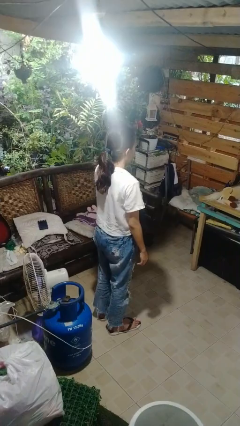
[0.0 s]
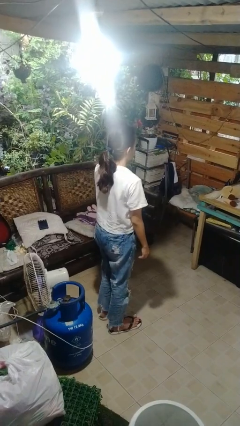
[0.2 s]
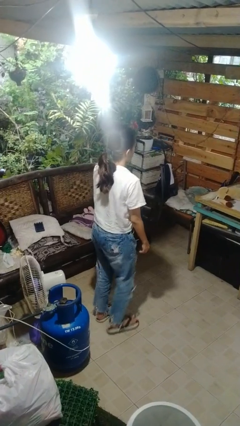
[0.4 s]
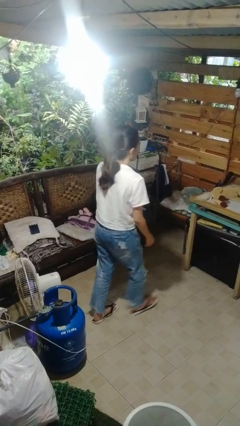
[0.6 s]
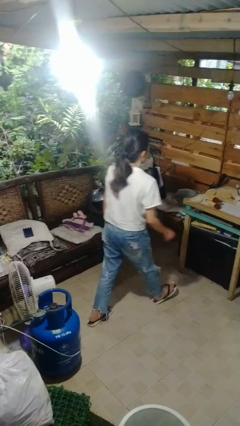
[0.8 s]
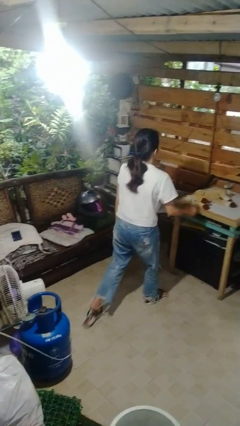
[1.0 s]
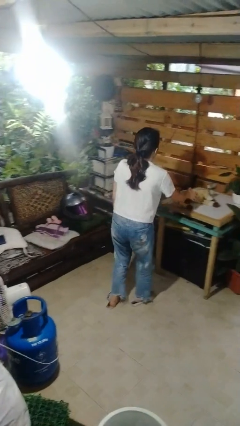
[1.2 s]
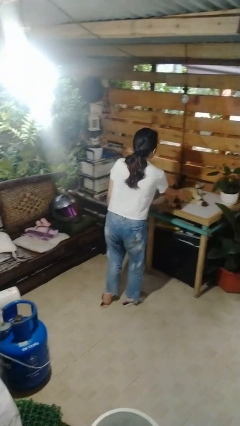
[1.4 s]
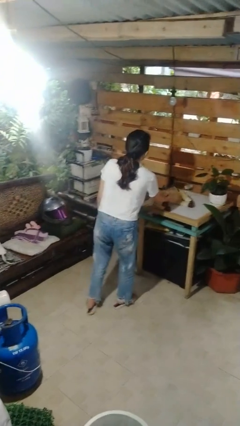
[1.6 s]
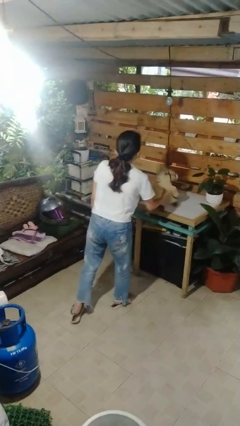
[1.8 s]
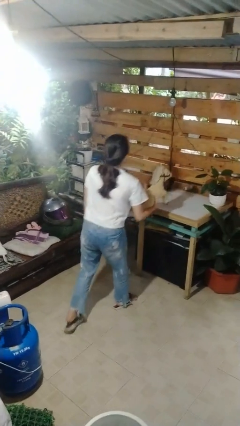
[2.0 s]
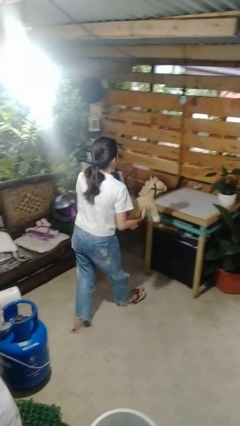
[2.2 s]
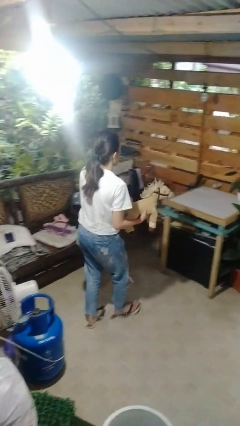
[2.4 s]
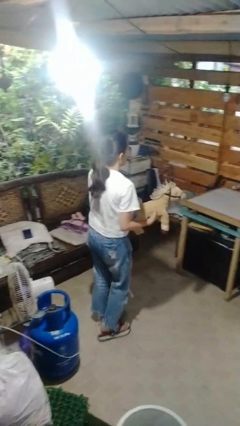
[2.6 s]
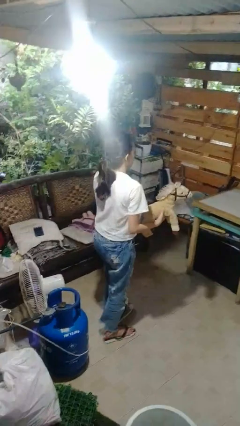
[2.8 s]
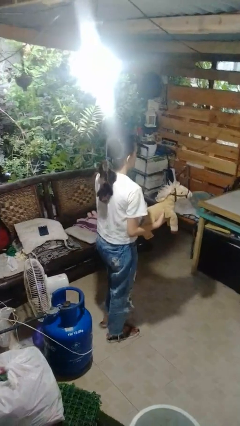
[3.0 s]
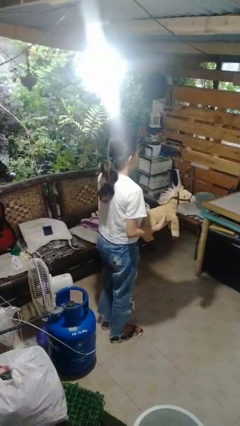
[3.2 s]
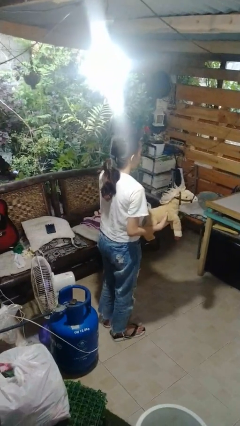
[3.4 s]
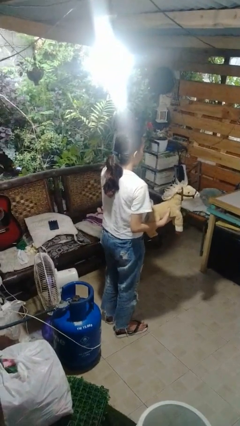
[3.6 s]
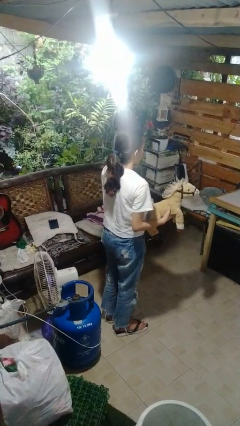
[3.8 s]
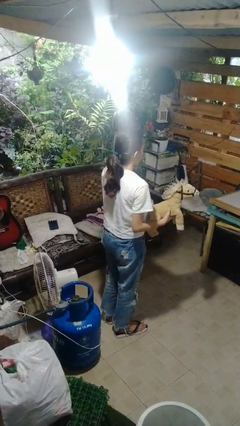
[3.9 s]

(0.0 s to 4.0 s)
person picks up object from table

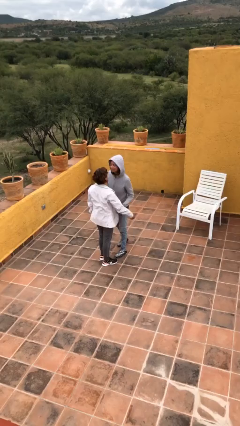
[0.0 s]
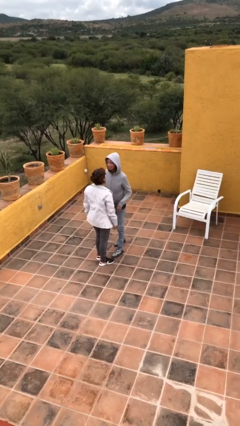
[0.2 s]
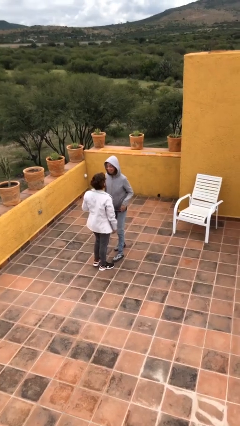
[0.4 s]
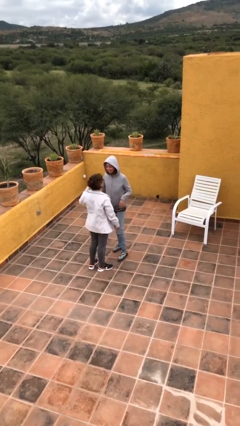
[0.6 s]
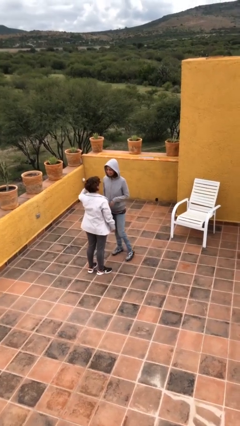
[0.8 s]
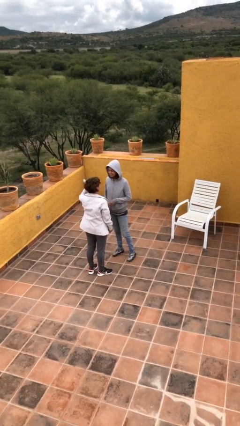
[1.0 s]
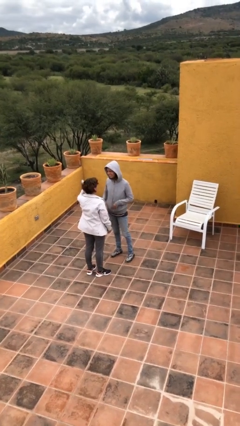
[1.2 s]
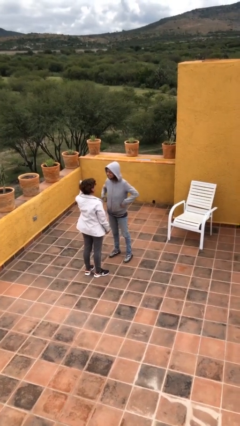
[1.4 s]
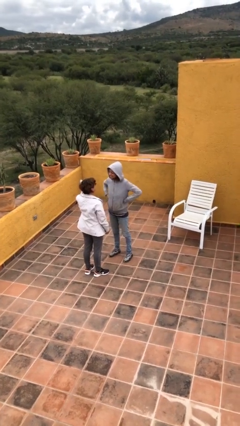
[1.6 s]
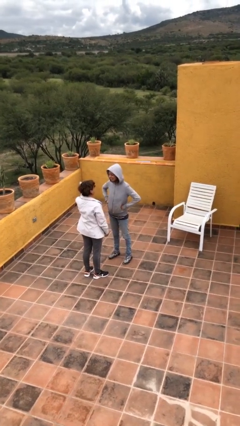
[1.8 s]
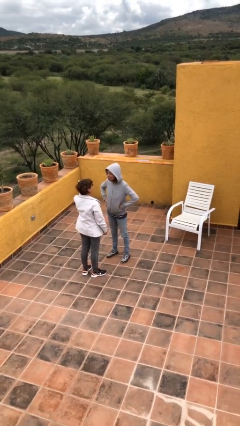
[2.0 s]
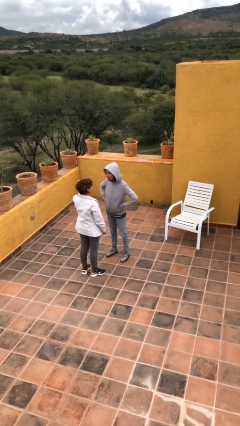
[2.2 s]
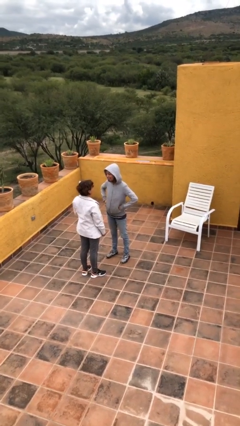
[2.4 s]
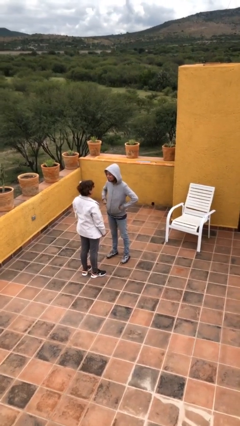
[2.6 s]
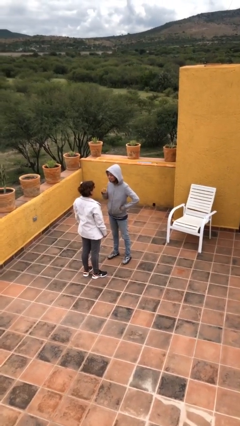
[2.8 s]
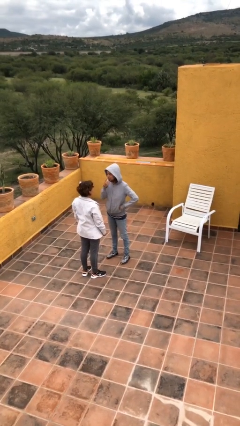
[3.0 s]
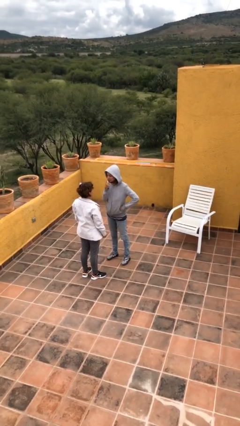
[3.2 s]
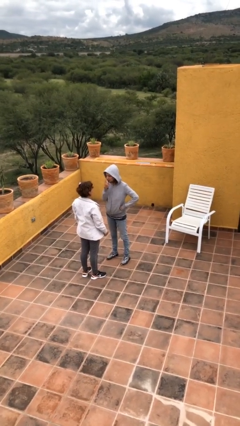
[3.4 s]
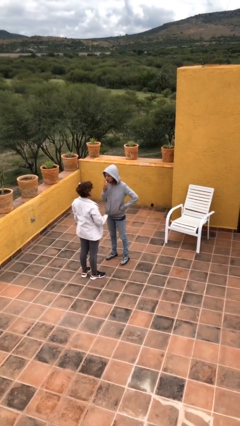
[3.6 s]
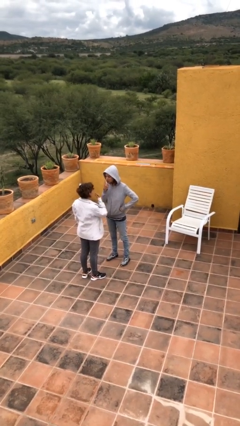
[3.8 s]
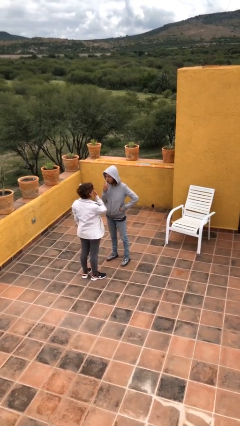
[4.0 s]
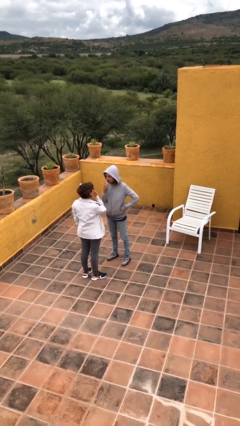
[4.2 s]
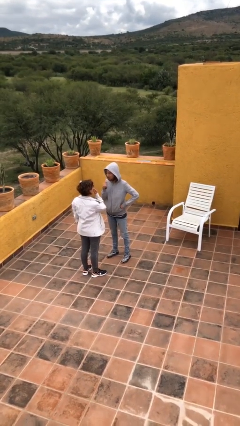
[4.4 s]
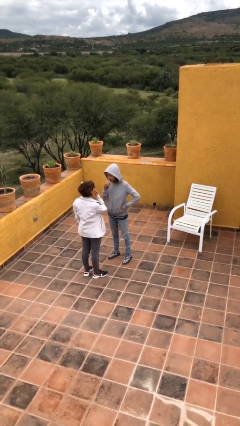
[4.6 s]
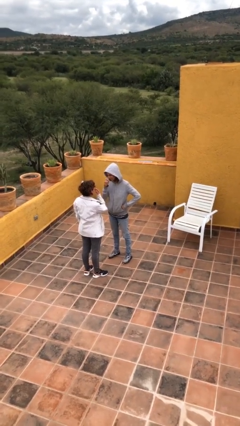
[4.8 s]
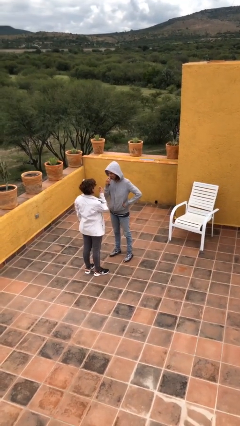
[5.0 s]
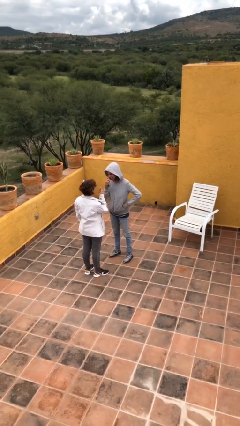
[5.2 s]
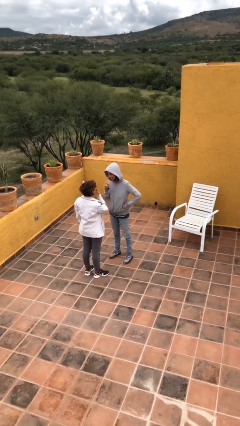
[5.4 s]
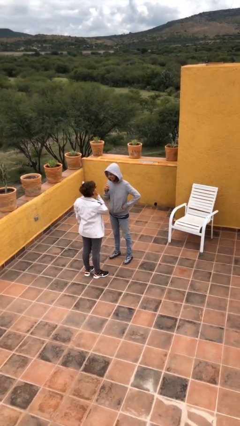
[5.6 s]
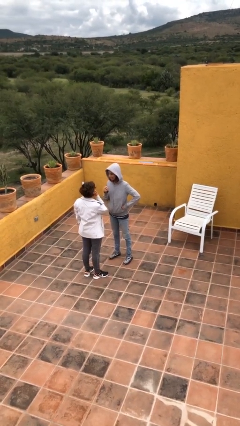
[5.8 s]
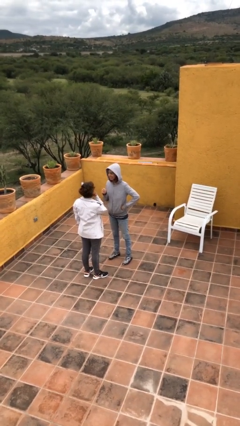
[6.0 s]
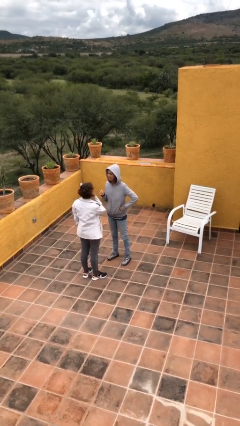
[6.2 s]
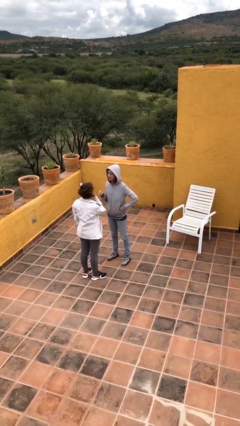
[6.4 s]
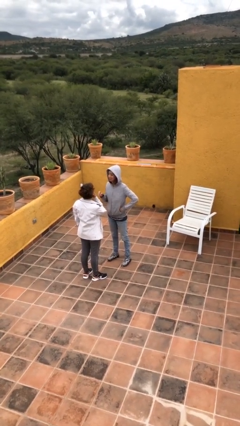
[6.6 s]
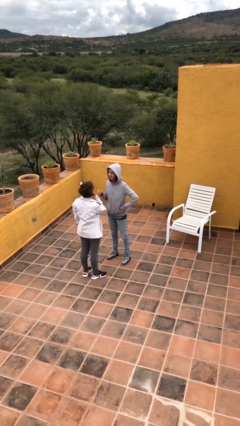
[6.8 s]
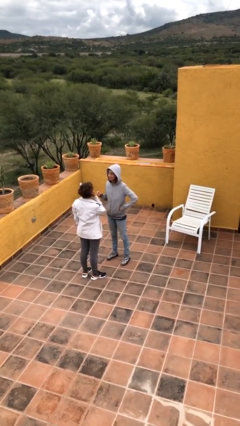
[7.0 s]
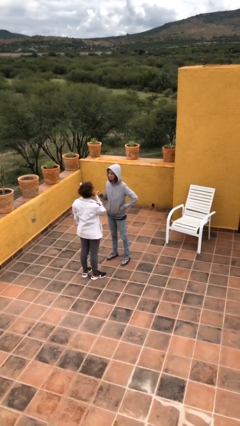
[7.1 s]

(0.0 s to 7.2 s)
person talks to person

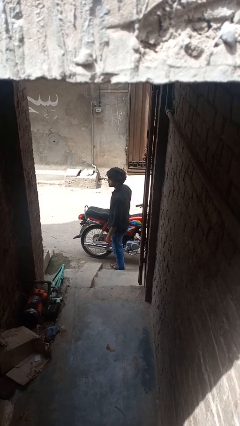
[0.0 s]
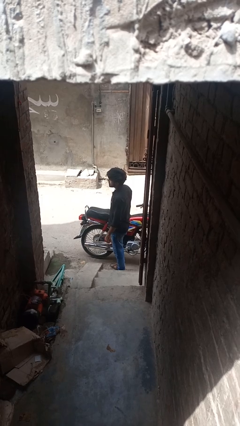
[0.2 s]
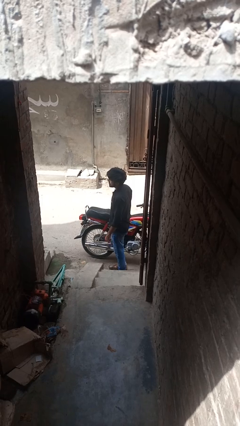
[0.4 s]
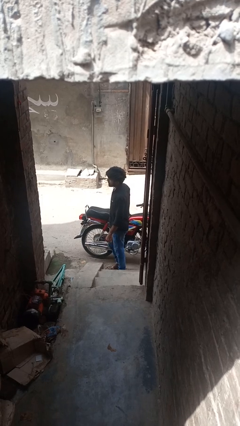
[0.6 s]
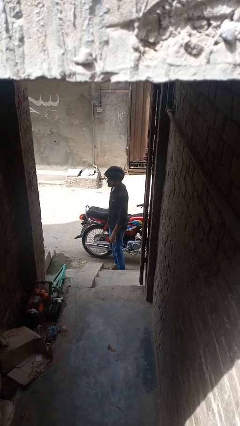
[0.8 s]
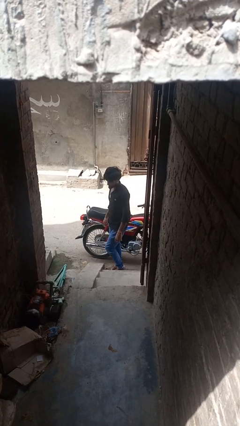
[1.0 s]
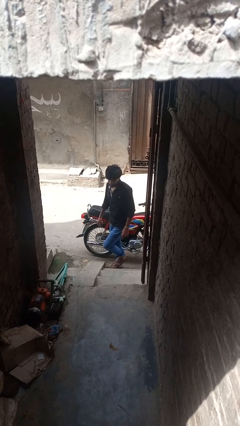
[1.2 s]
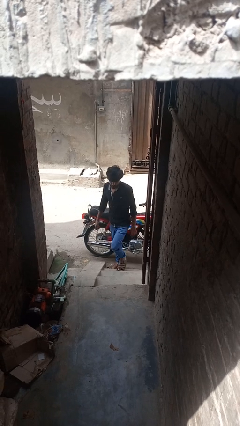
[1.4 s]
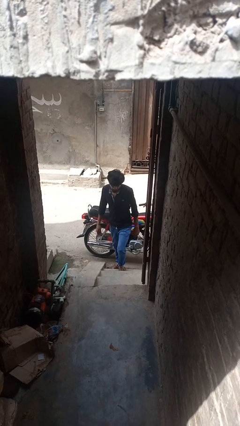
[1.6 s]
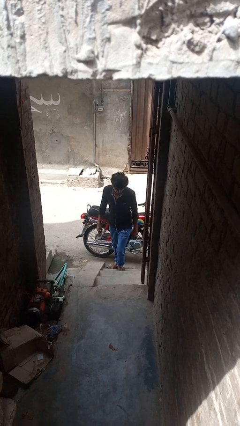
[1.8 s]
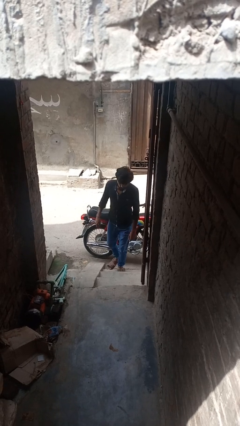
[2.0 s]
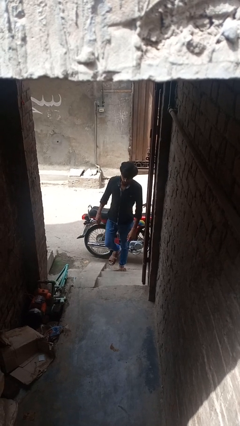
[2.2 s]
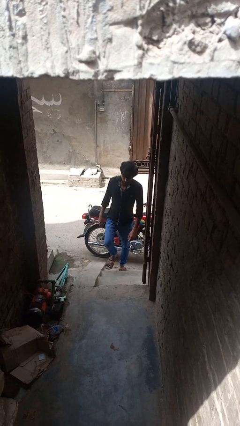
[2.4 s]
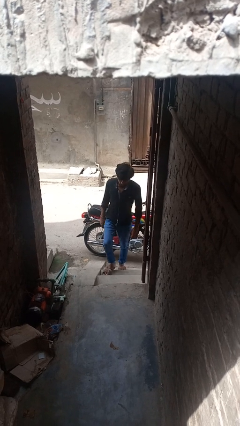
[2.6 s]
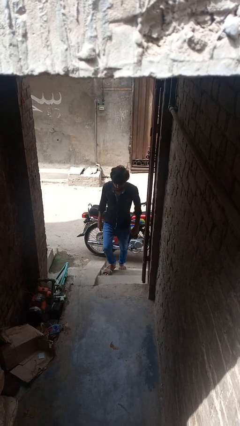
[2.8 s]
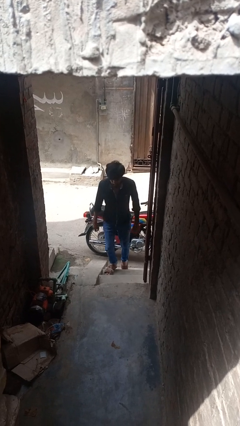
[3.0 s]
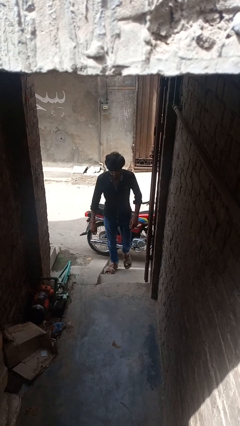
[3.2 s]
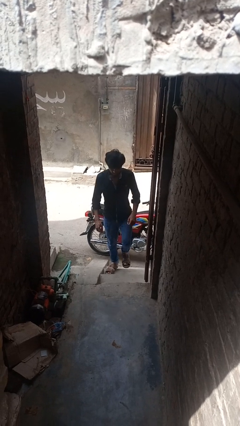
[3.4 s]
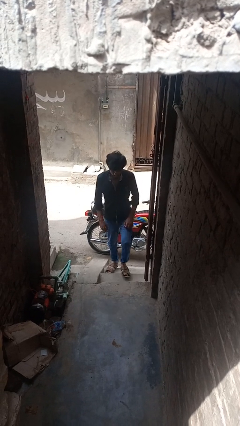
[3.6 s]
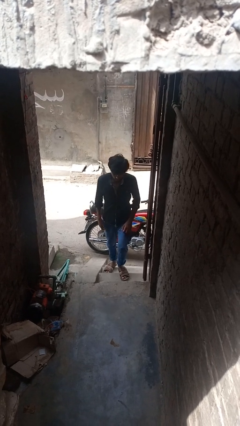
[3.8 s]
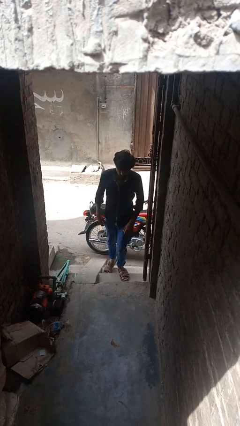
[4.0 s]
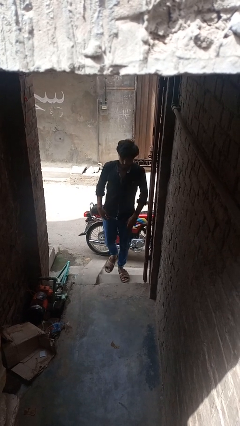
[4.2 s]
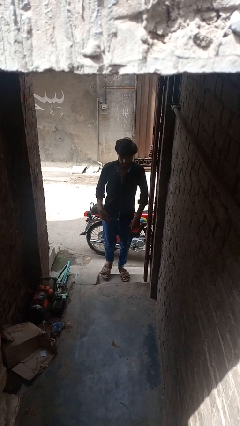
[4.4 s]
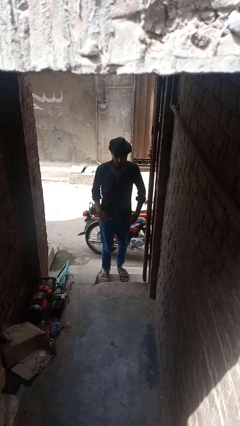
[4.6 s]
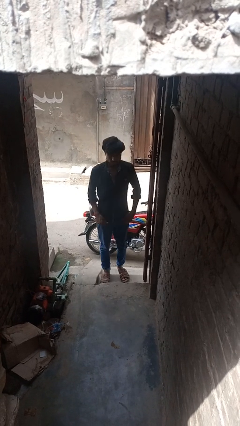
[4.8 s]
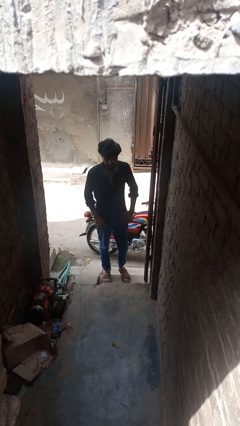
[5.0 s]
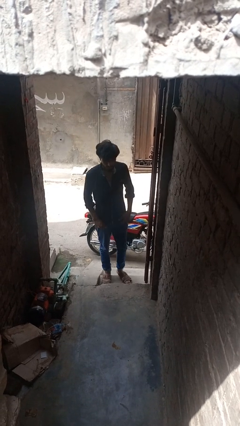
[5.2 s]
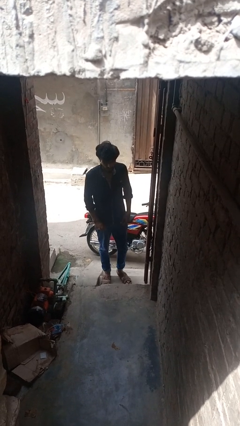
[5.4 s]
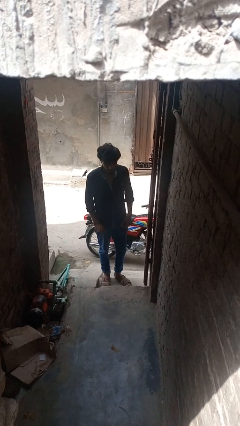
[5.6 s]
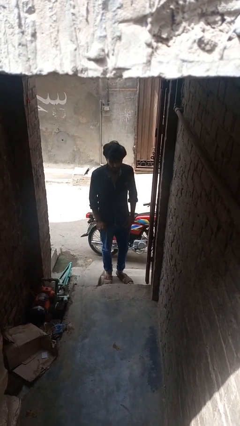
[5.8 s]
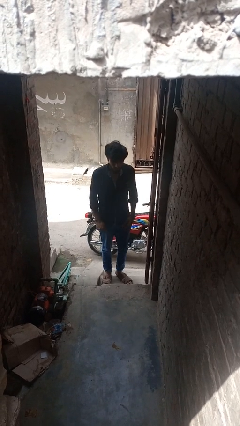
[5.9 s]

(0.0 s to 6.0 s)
person climbs up stairs

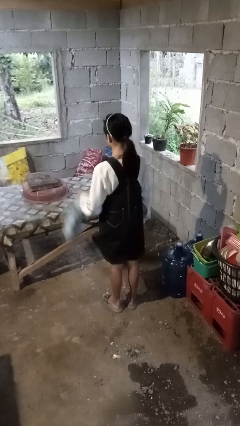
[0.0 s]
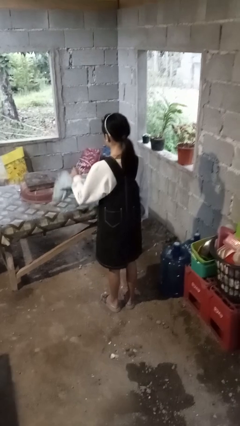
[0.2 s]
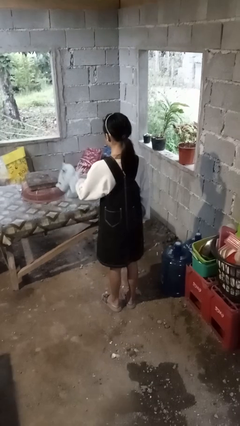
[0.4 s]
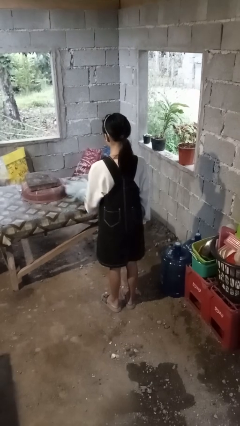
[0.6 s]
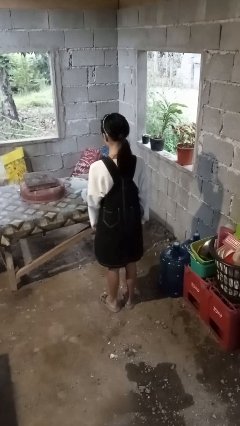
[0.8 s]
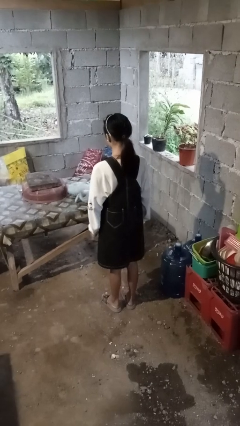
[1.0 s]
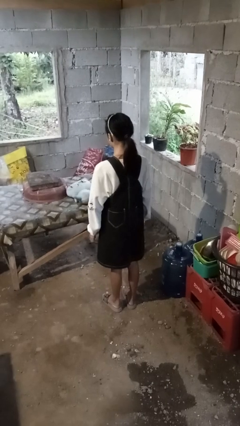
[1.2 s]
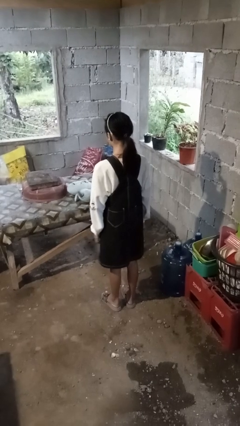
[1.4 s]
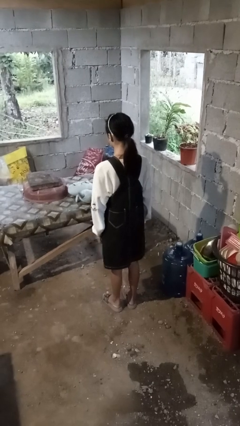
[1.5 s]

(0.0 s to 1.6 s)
person throws object on table
